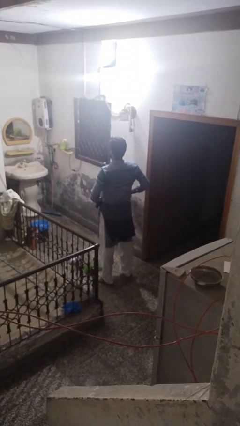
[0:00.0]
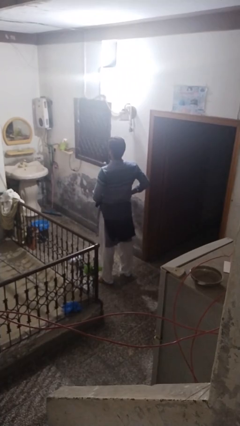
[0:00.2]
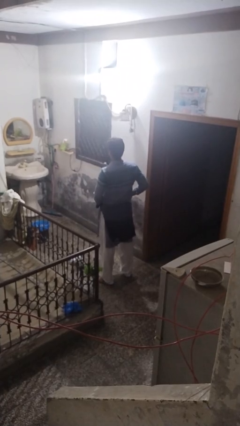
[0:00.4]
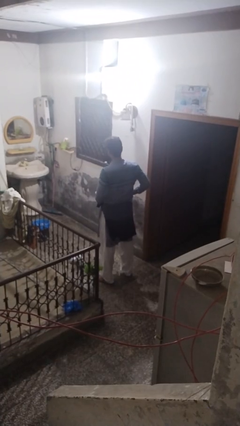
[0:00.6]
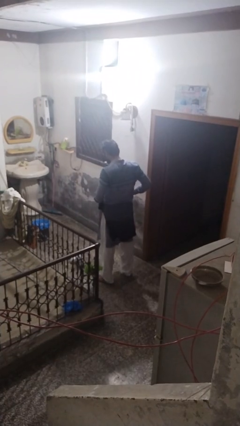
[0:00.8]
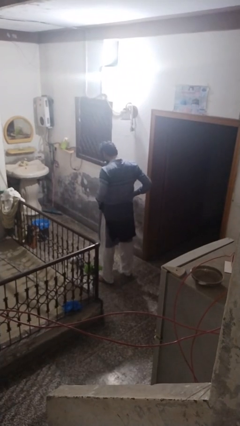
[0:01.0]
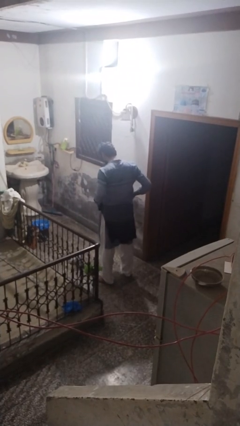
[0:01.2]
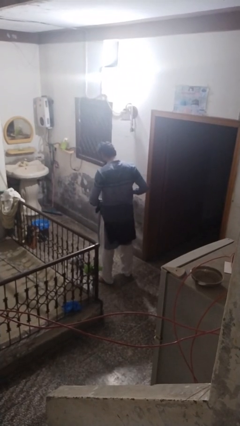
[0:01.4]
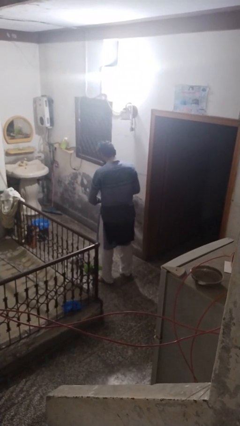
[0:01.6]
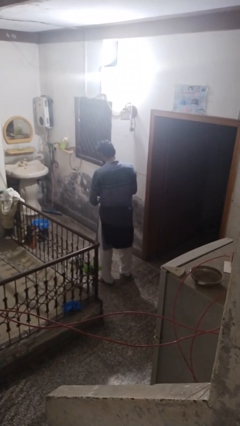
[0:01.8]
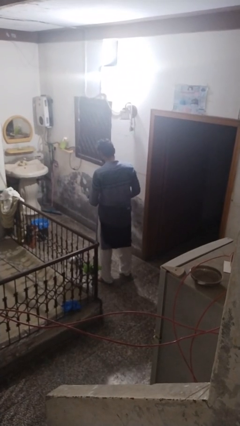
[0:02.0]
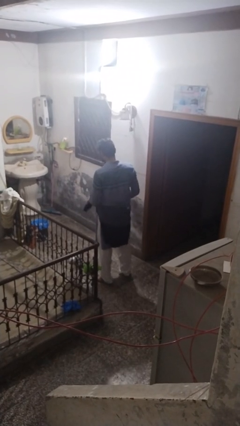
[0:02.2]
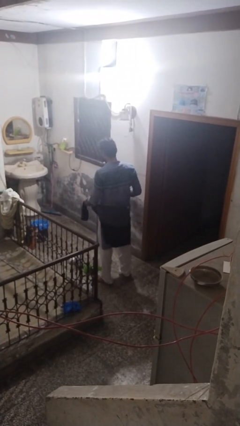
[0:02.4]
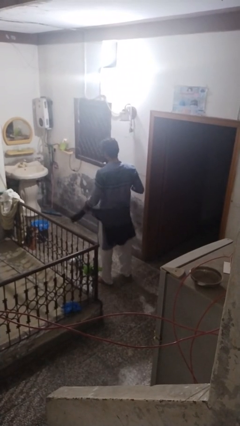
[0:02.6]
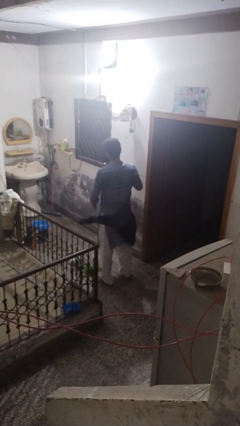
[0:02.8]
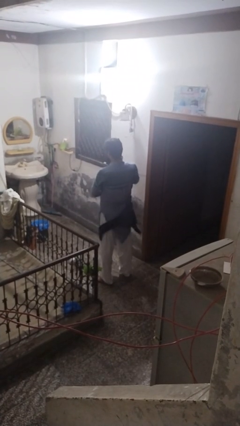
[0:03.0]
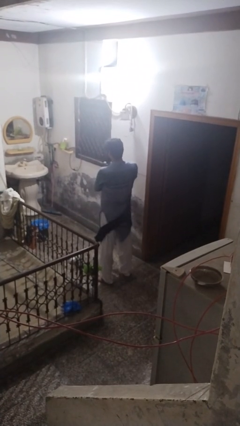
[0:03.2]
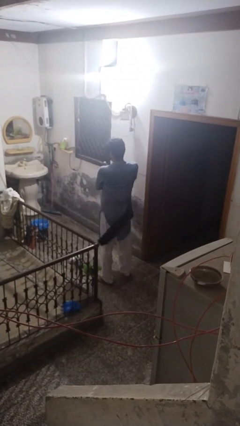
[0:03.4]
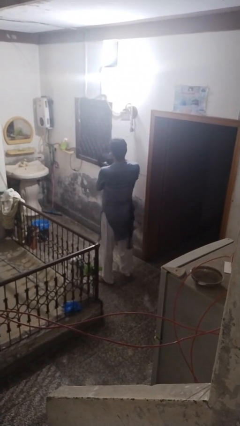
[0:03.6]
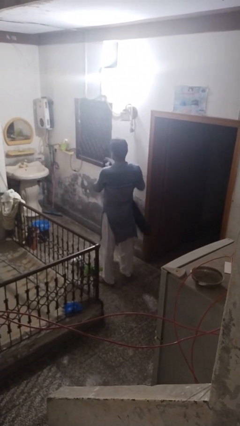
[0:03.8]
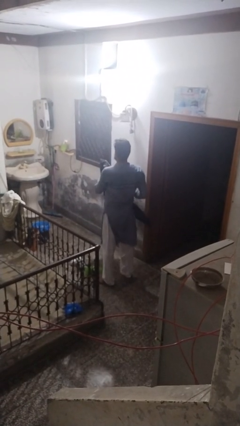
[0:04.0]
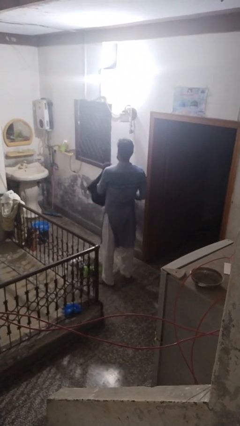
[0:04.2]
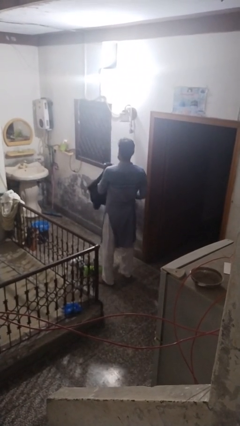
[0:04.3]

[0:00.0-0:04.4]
person unties jacket around waist

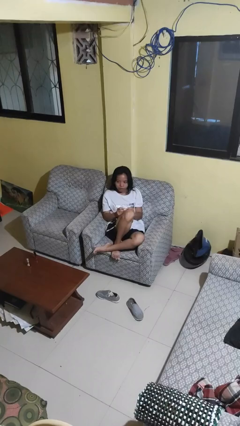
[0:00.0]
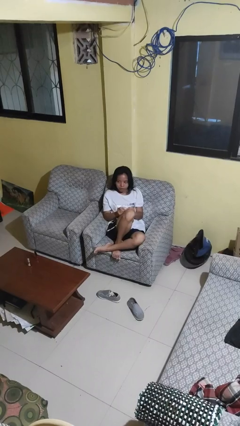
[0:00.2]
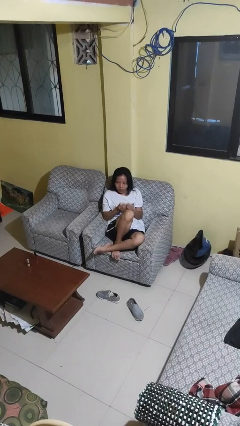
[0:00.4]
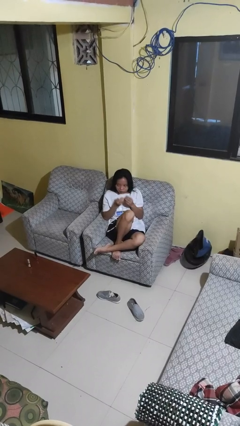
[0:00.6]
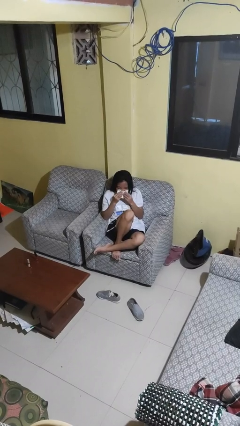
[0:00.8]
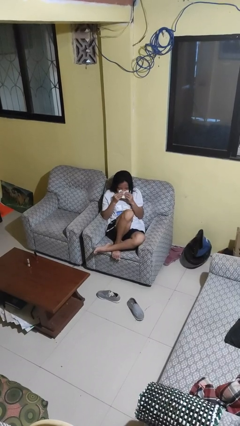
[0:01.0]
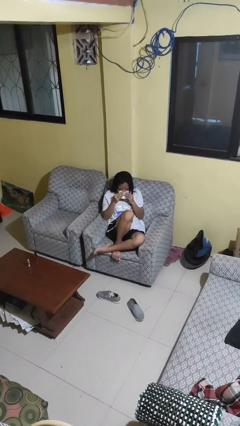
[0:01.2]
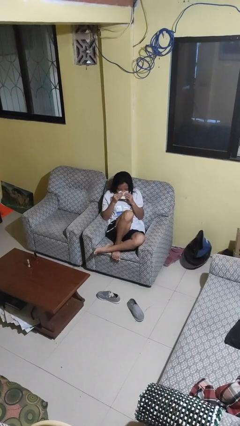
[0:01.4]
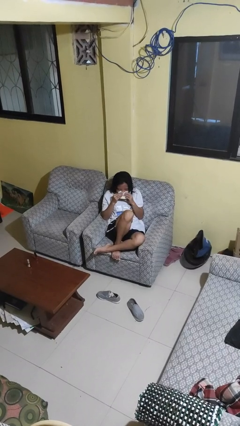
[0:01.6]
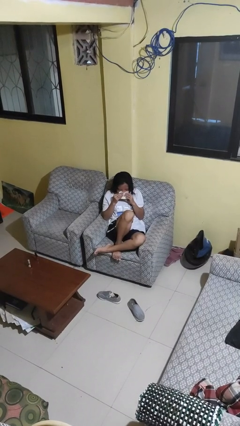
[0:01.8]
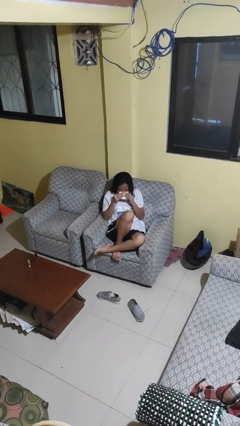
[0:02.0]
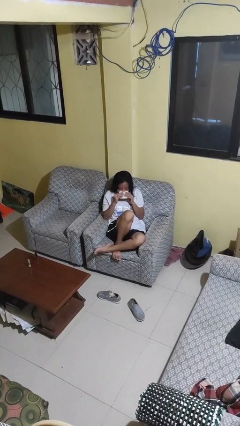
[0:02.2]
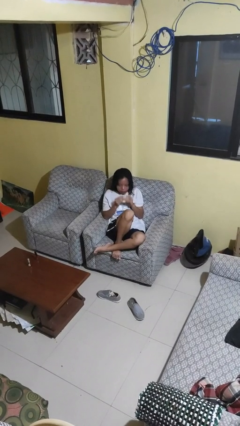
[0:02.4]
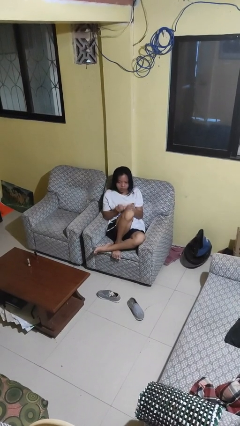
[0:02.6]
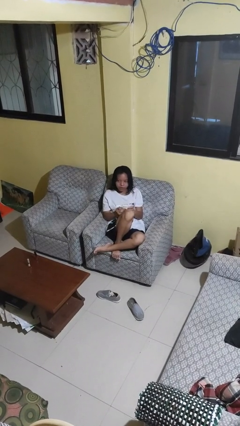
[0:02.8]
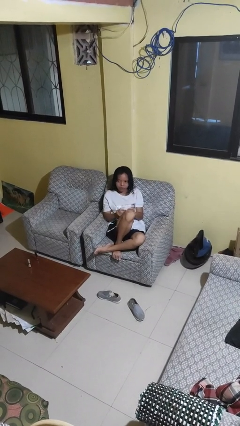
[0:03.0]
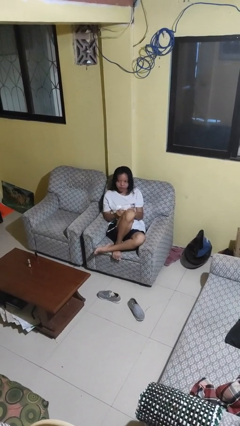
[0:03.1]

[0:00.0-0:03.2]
person blows nose

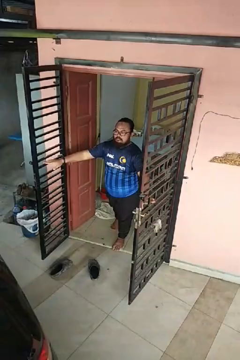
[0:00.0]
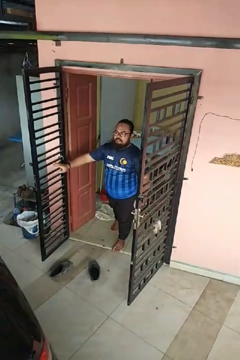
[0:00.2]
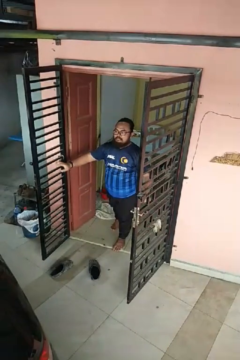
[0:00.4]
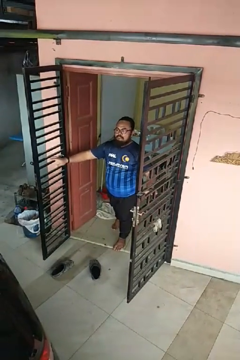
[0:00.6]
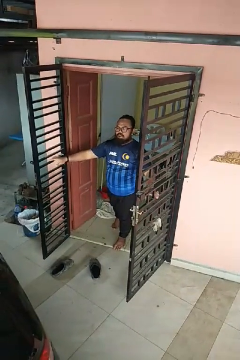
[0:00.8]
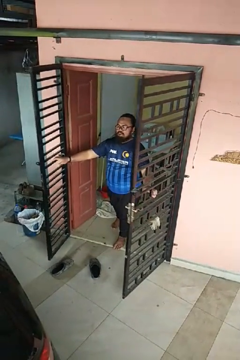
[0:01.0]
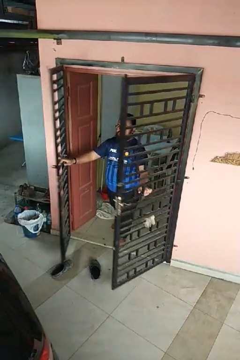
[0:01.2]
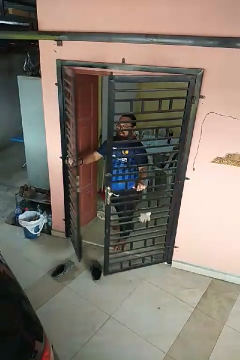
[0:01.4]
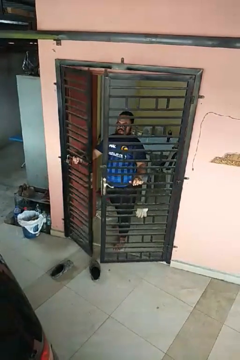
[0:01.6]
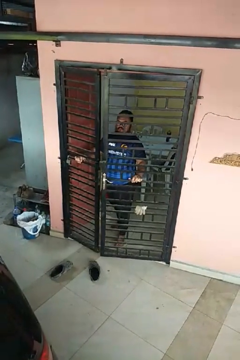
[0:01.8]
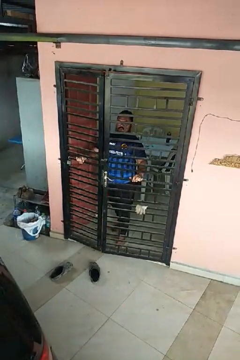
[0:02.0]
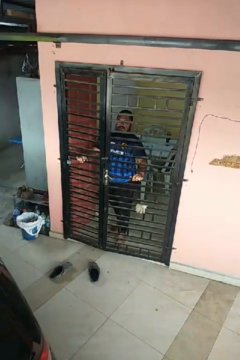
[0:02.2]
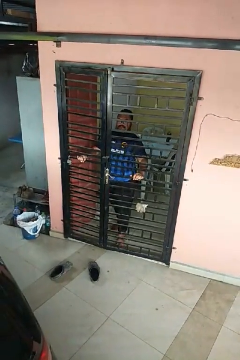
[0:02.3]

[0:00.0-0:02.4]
person closes gate

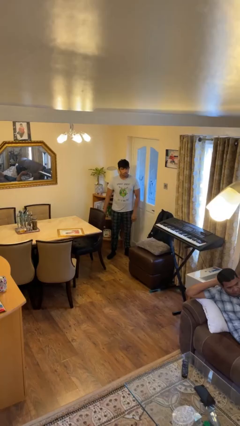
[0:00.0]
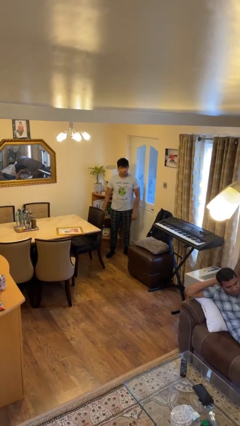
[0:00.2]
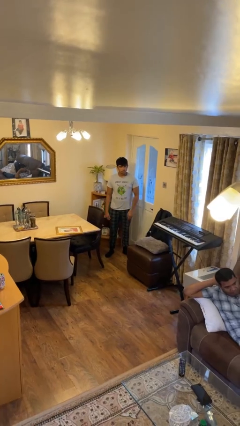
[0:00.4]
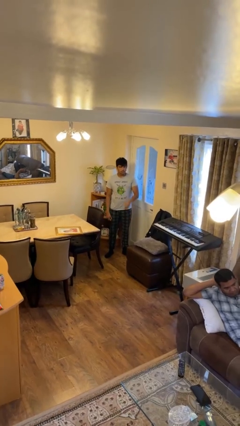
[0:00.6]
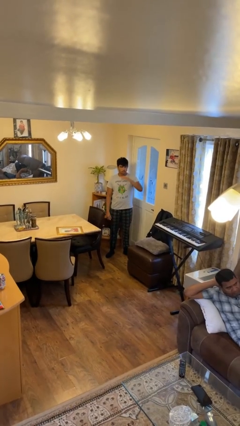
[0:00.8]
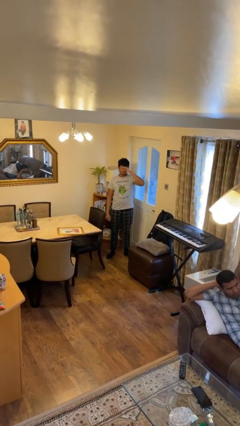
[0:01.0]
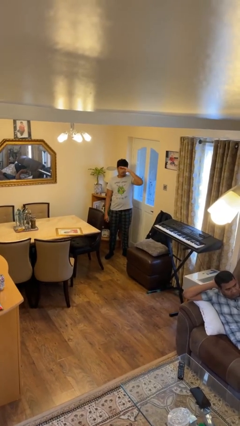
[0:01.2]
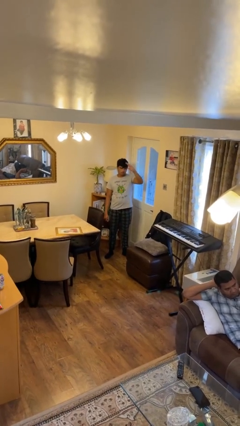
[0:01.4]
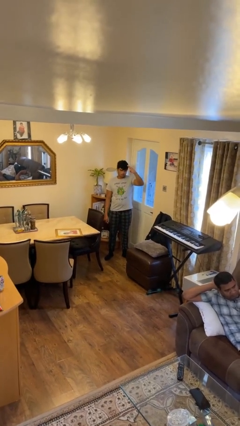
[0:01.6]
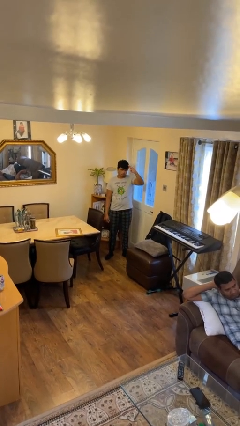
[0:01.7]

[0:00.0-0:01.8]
person salutes

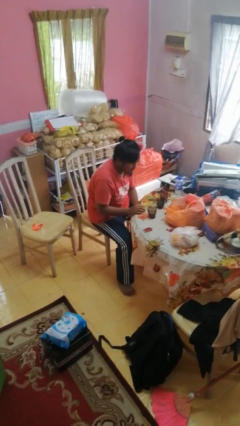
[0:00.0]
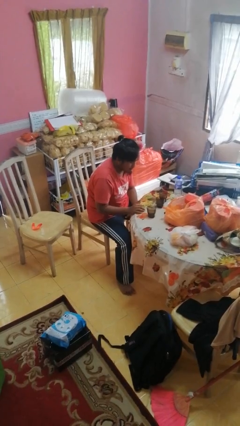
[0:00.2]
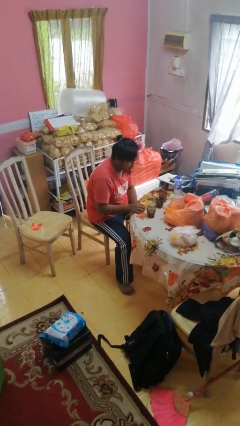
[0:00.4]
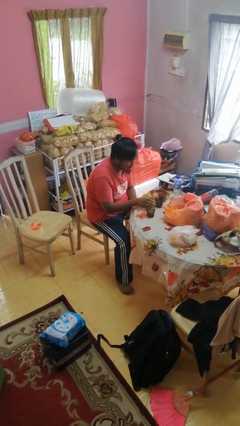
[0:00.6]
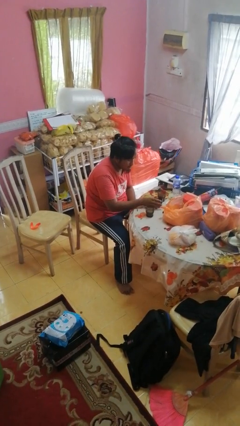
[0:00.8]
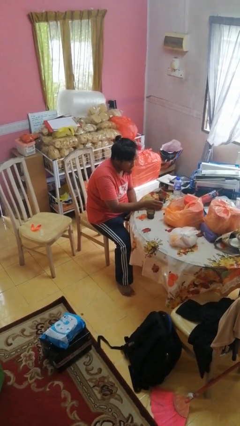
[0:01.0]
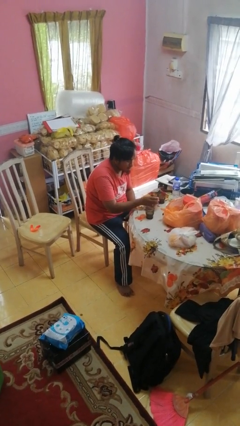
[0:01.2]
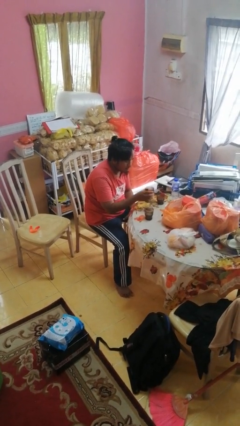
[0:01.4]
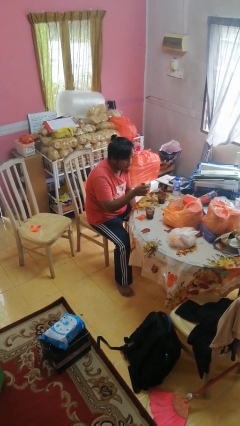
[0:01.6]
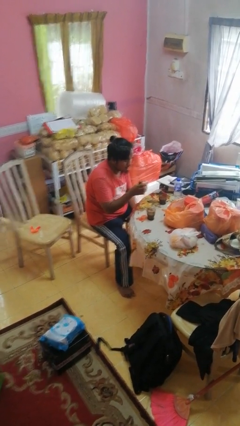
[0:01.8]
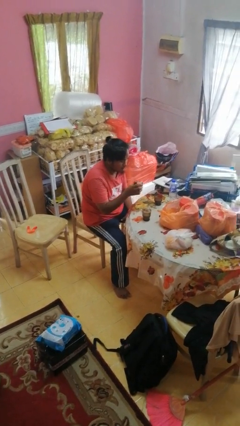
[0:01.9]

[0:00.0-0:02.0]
person picks up object from table

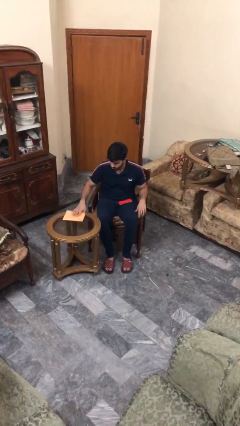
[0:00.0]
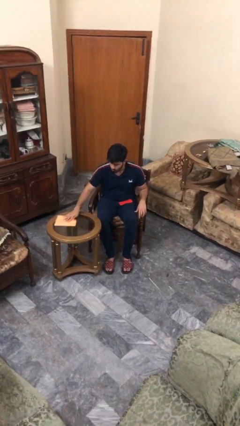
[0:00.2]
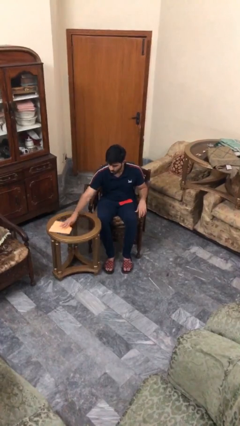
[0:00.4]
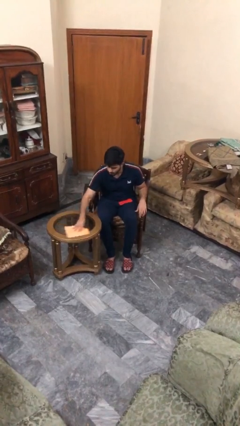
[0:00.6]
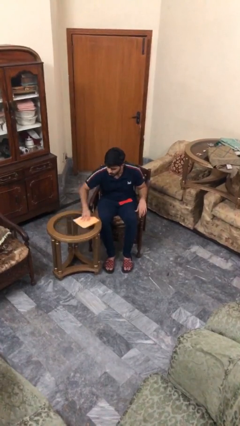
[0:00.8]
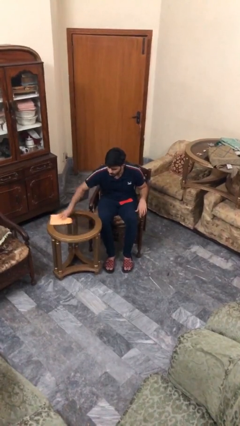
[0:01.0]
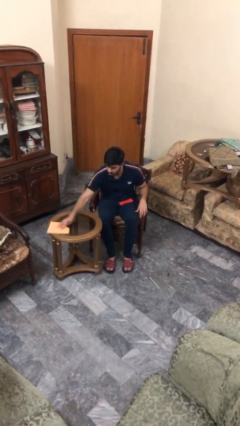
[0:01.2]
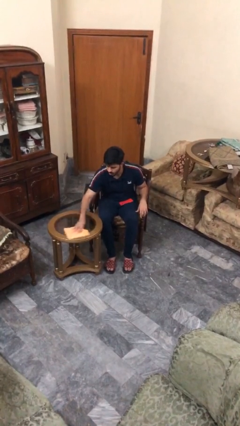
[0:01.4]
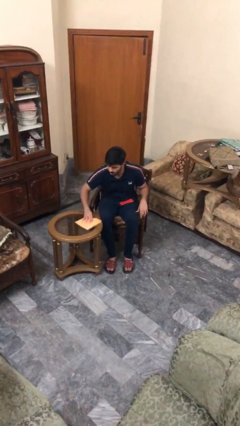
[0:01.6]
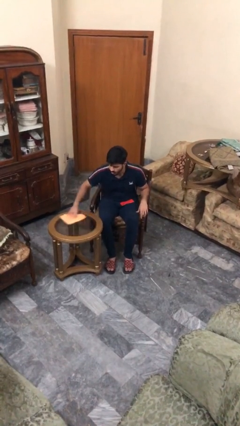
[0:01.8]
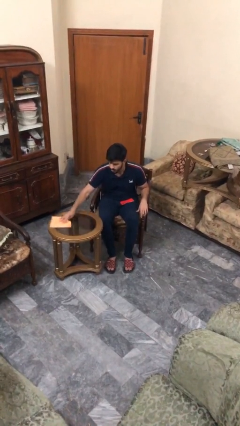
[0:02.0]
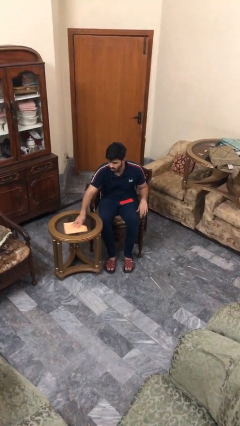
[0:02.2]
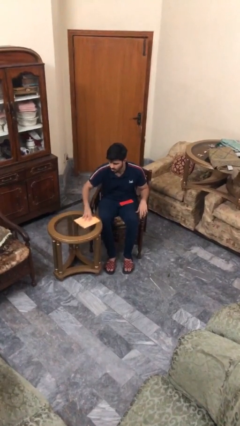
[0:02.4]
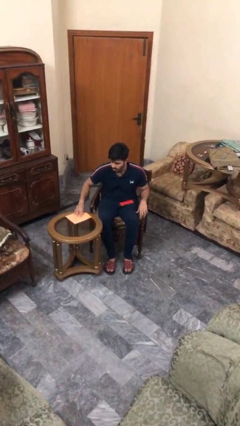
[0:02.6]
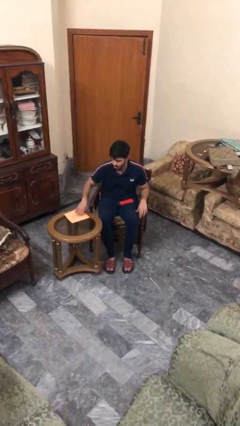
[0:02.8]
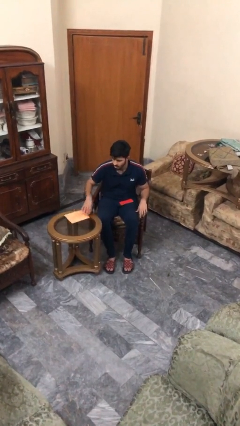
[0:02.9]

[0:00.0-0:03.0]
person cleans table with rag

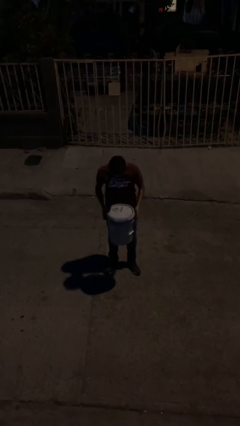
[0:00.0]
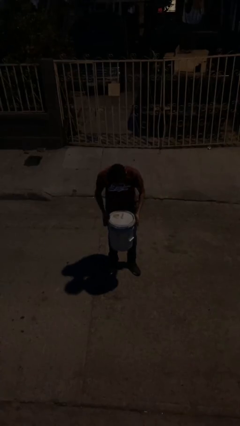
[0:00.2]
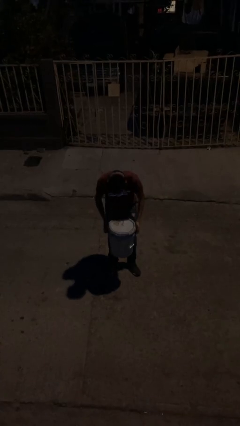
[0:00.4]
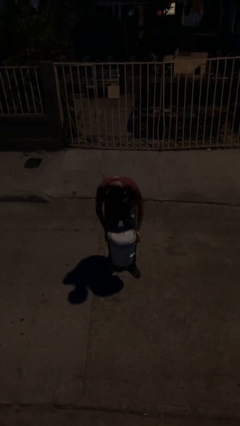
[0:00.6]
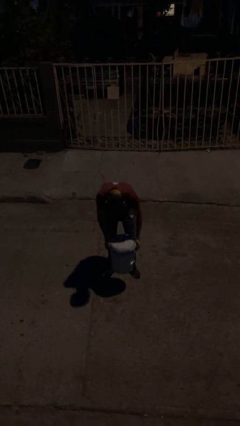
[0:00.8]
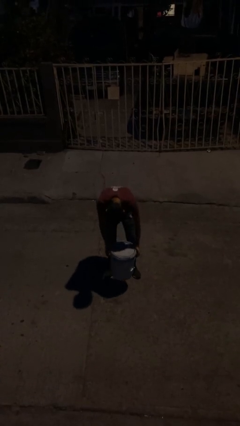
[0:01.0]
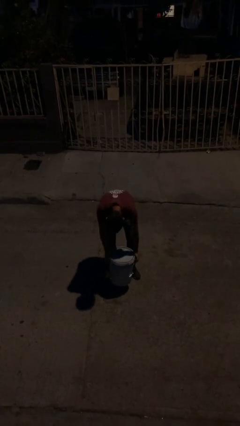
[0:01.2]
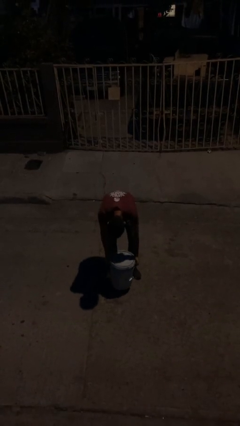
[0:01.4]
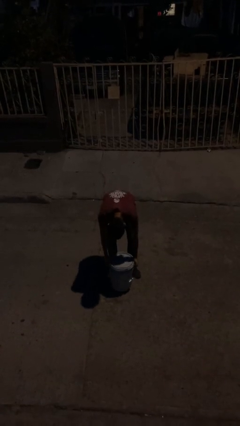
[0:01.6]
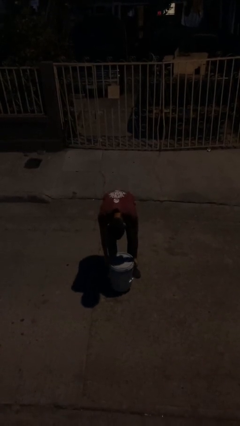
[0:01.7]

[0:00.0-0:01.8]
person puts down object on floor
